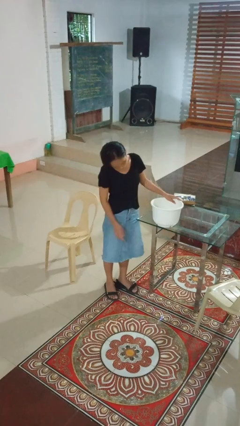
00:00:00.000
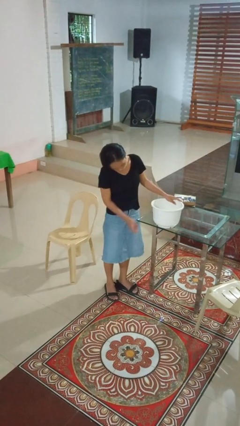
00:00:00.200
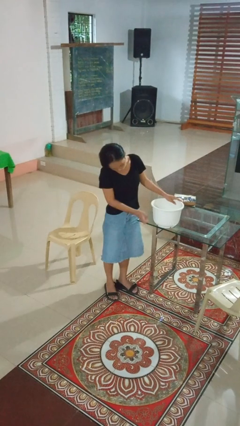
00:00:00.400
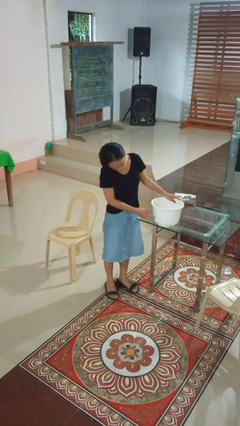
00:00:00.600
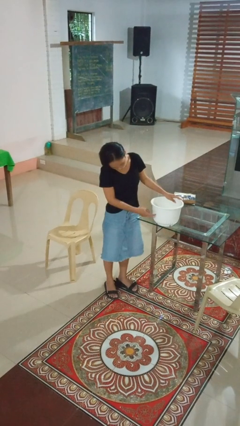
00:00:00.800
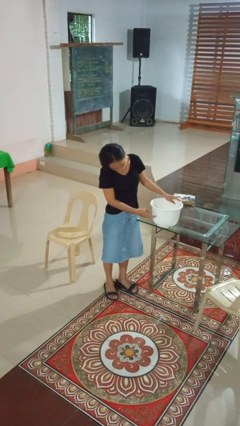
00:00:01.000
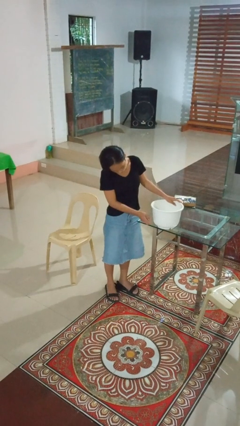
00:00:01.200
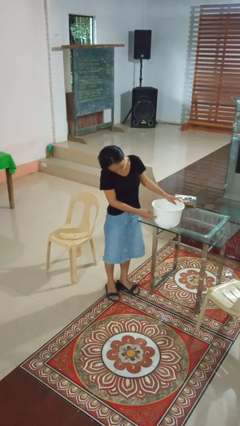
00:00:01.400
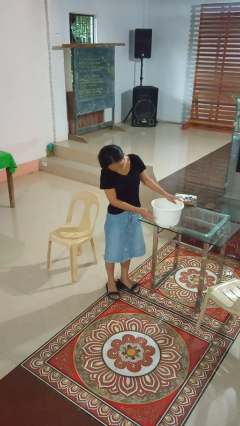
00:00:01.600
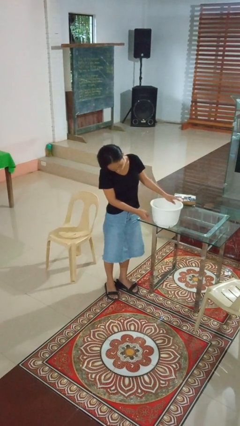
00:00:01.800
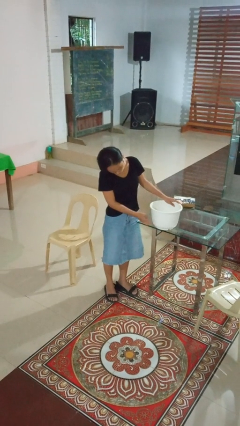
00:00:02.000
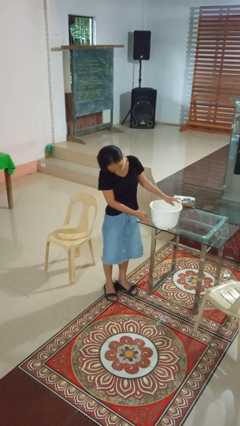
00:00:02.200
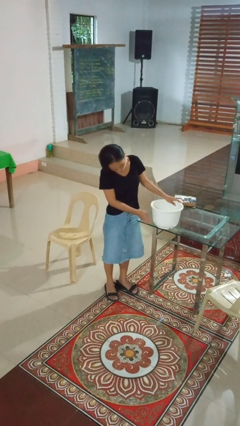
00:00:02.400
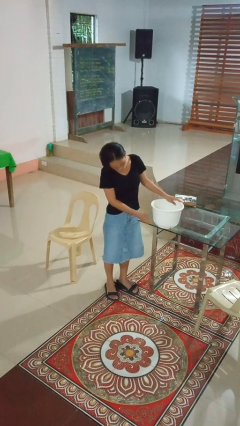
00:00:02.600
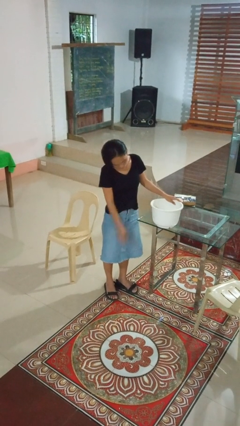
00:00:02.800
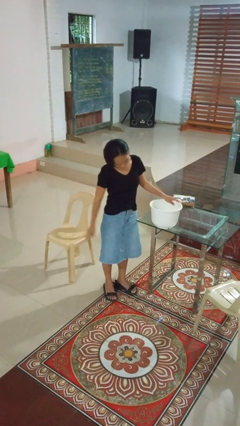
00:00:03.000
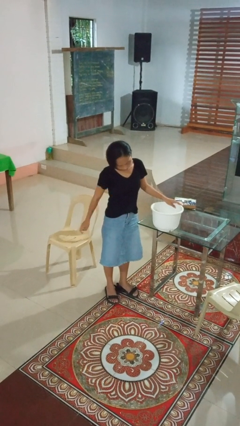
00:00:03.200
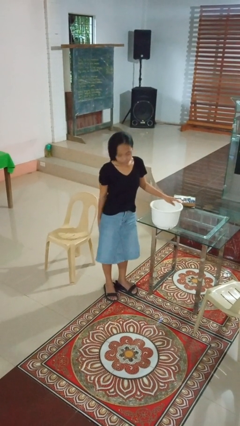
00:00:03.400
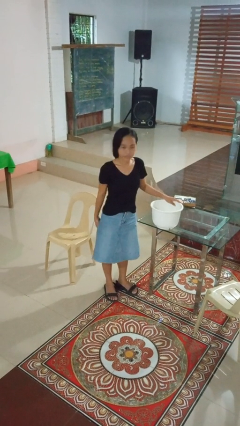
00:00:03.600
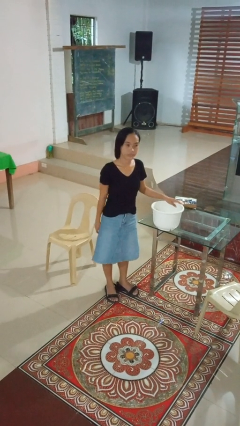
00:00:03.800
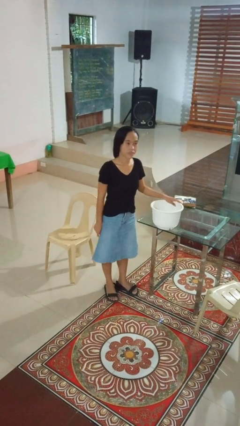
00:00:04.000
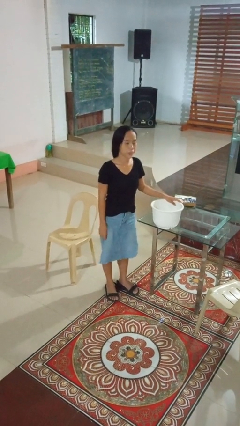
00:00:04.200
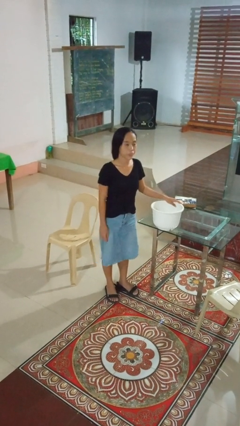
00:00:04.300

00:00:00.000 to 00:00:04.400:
person taps object with finger

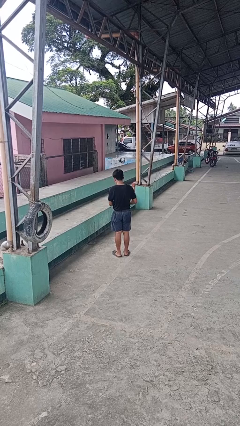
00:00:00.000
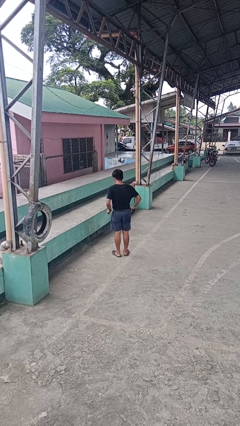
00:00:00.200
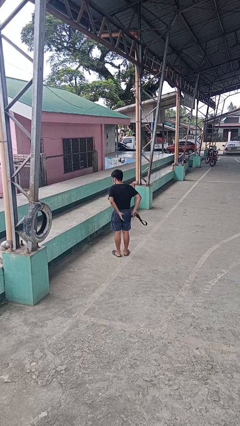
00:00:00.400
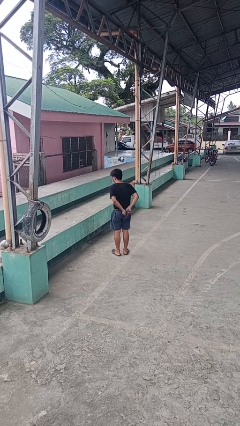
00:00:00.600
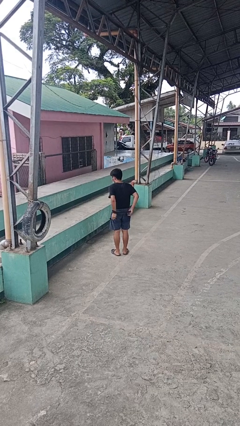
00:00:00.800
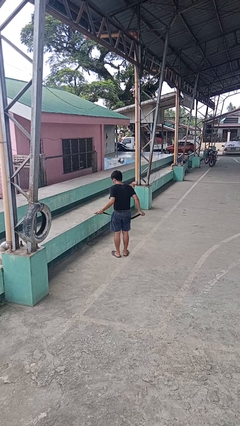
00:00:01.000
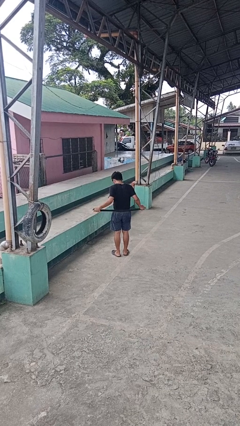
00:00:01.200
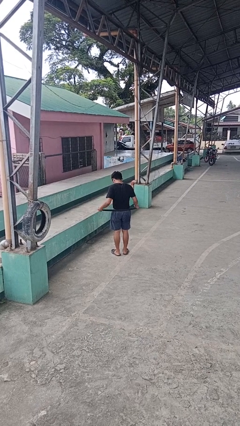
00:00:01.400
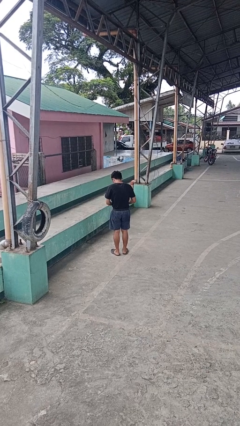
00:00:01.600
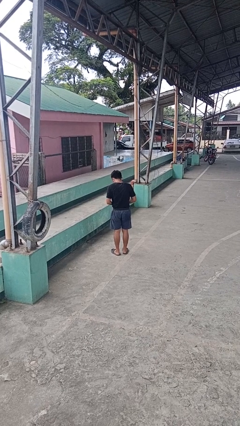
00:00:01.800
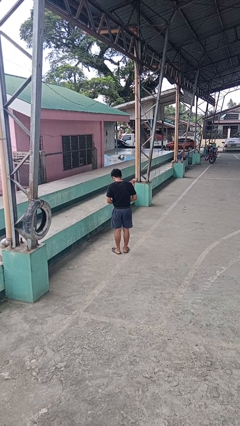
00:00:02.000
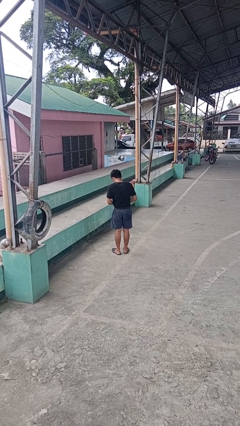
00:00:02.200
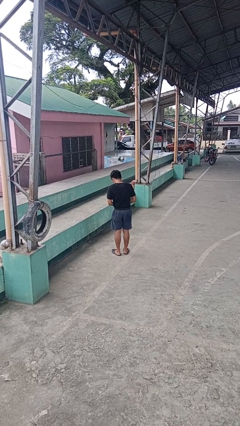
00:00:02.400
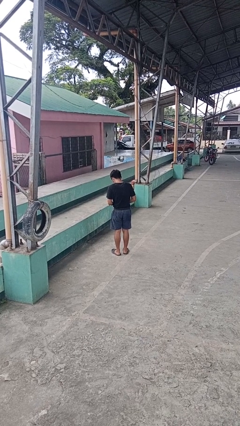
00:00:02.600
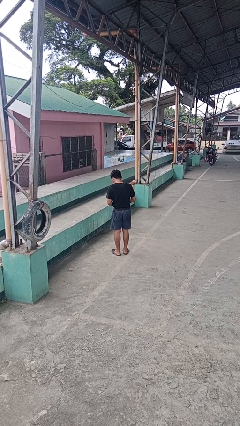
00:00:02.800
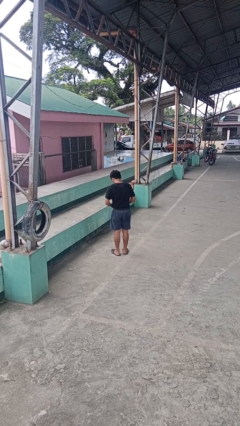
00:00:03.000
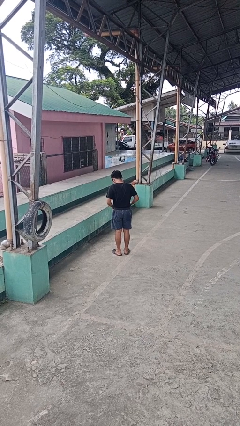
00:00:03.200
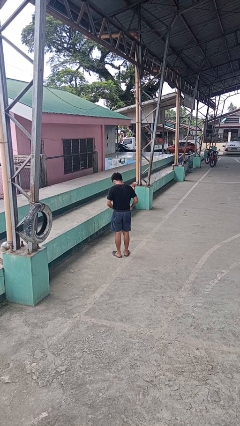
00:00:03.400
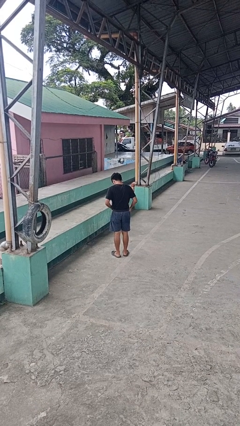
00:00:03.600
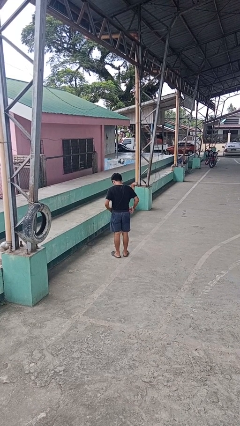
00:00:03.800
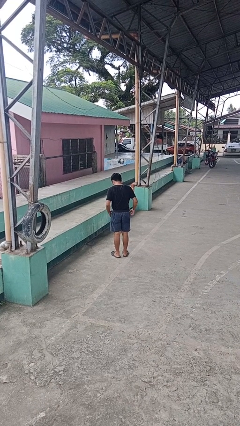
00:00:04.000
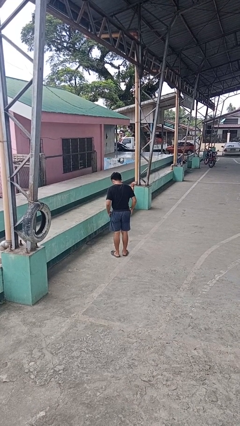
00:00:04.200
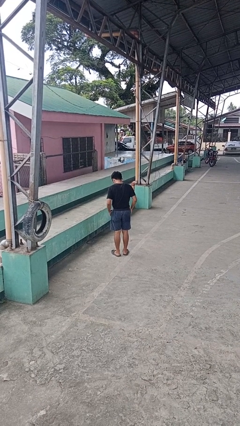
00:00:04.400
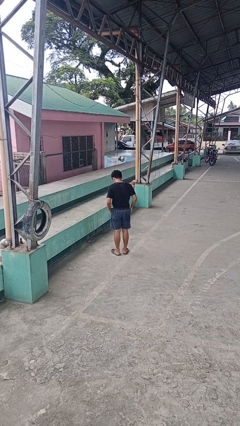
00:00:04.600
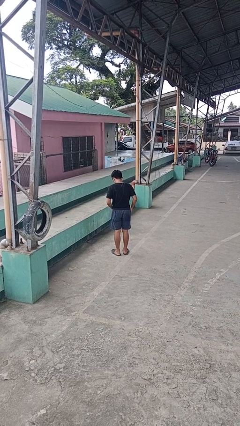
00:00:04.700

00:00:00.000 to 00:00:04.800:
person puts on belt

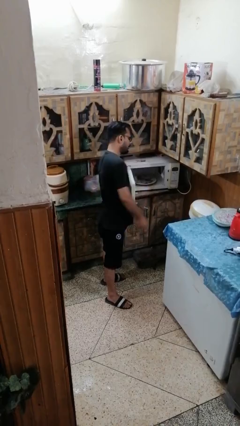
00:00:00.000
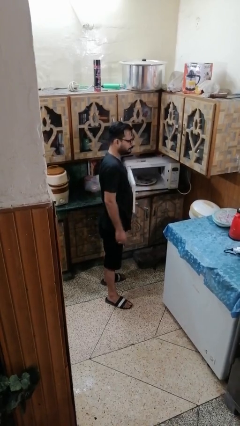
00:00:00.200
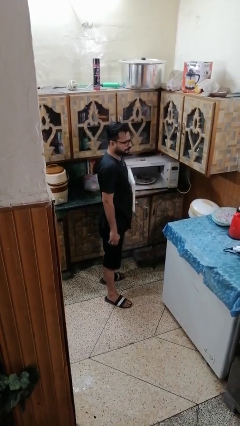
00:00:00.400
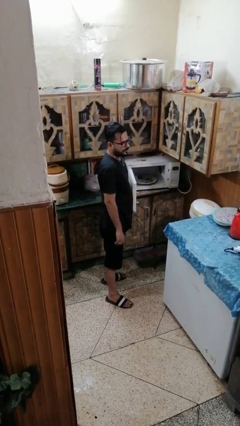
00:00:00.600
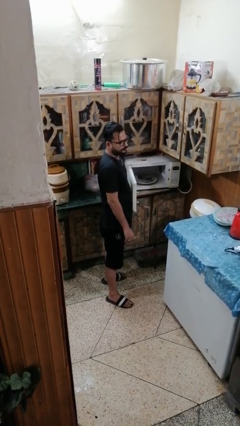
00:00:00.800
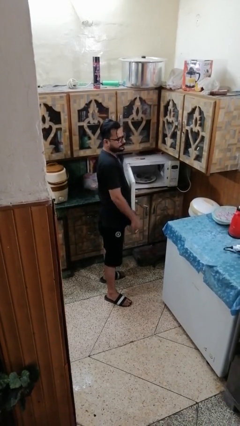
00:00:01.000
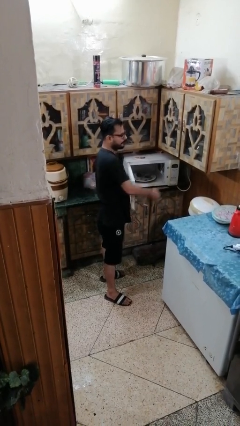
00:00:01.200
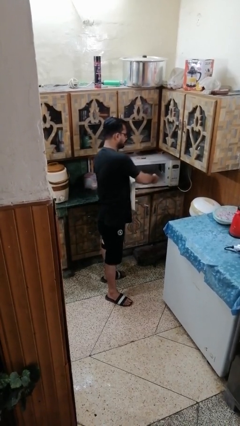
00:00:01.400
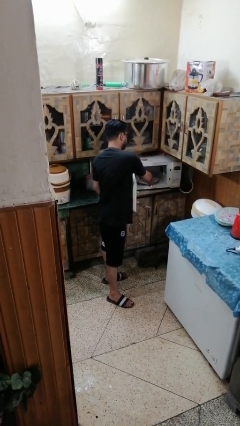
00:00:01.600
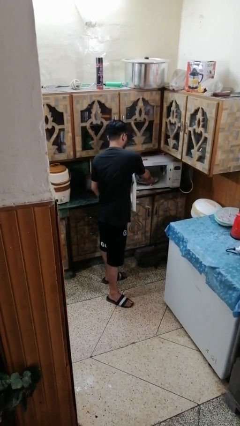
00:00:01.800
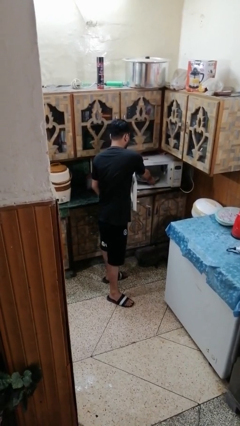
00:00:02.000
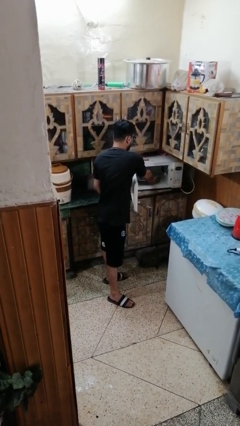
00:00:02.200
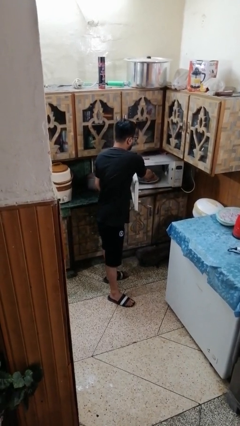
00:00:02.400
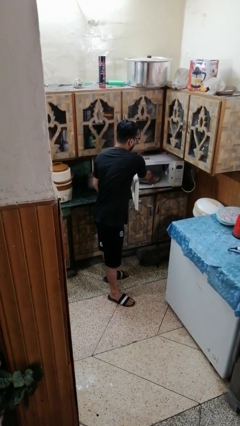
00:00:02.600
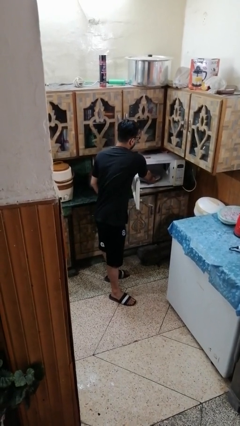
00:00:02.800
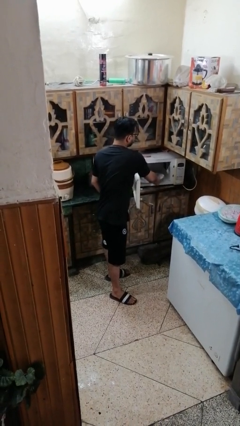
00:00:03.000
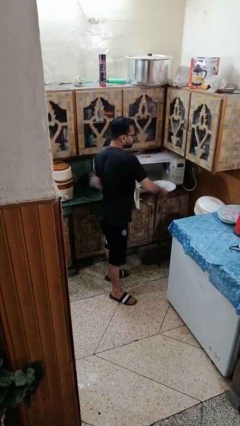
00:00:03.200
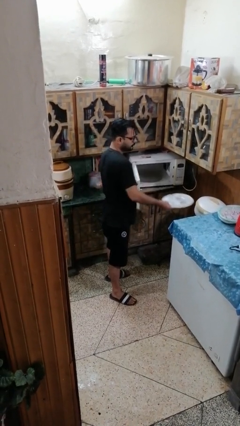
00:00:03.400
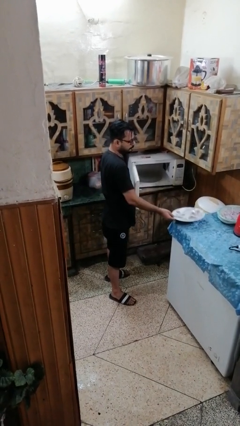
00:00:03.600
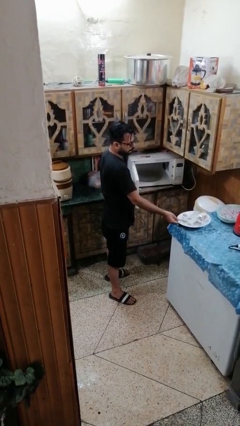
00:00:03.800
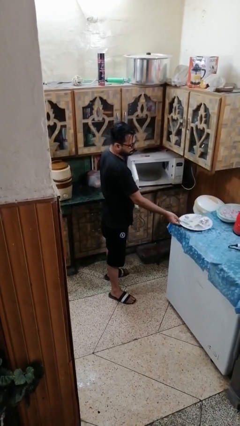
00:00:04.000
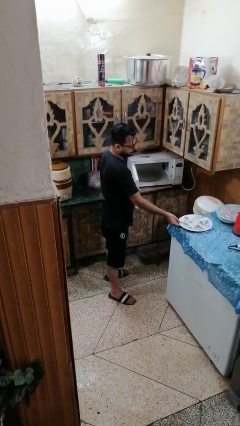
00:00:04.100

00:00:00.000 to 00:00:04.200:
person takes object from microwave

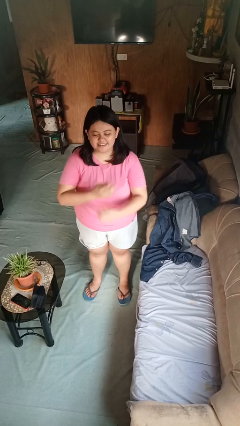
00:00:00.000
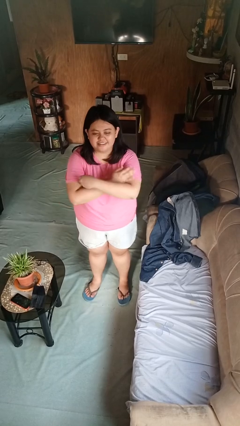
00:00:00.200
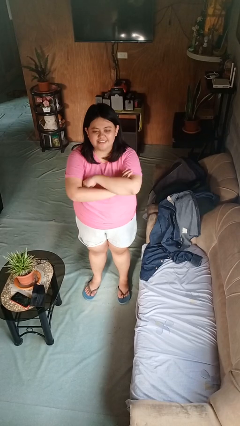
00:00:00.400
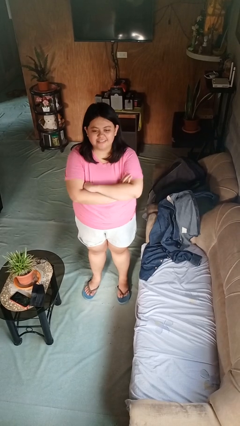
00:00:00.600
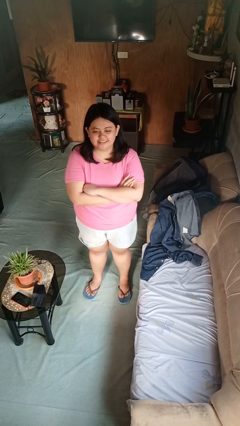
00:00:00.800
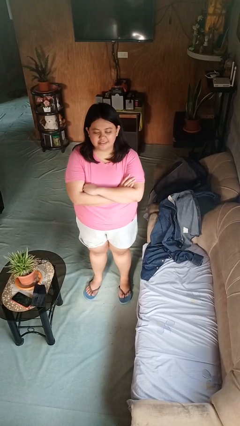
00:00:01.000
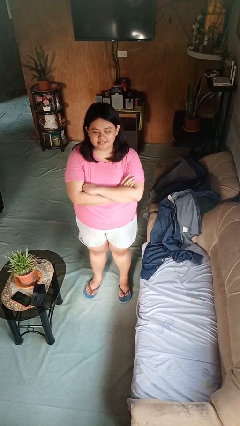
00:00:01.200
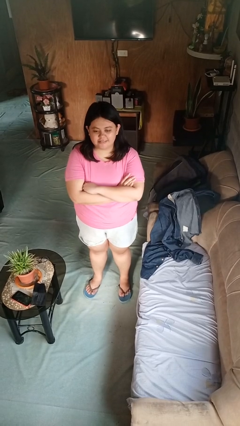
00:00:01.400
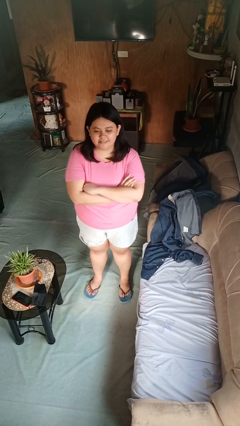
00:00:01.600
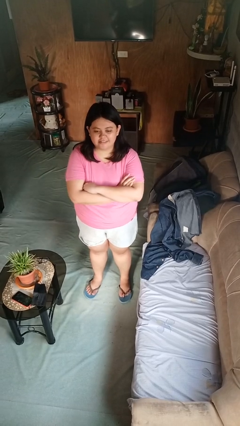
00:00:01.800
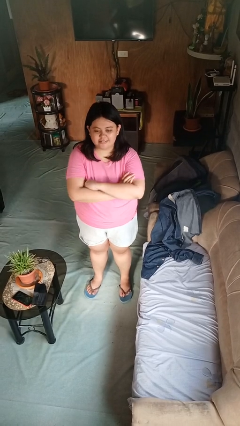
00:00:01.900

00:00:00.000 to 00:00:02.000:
person crosses arms

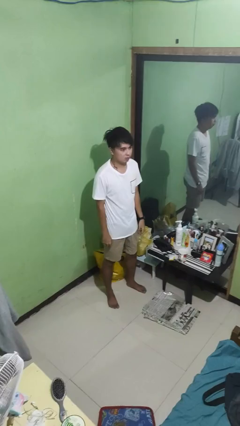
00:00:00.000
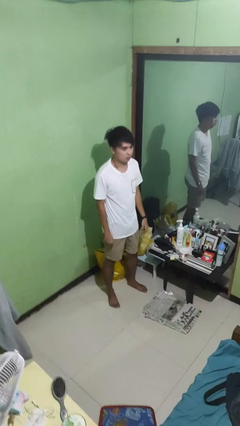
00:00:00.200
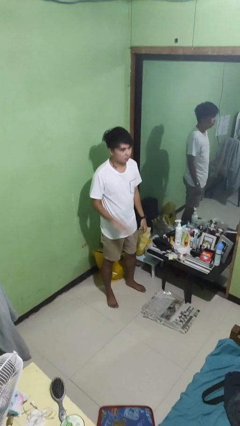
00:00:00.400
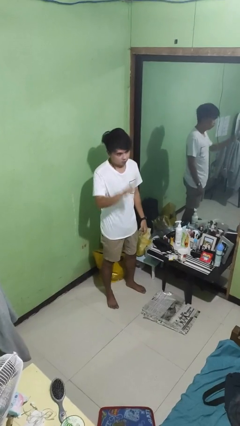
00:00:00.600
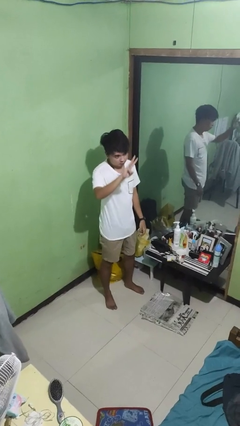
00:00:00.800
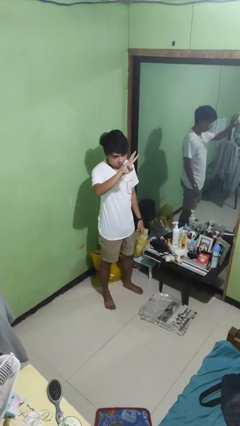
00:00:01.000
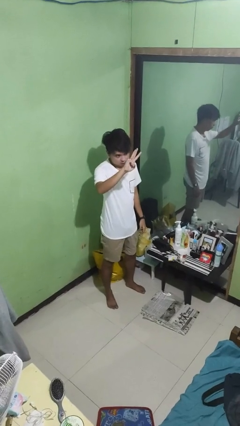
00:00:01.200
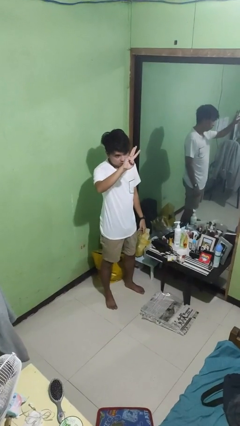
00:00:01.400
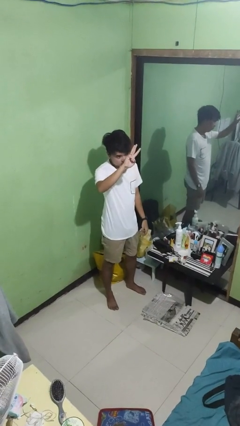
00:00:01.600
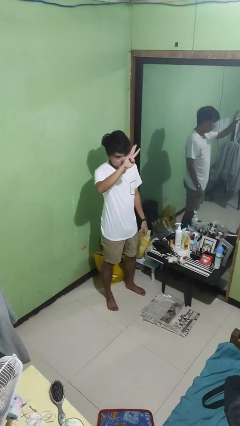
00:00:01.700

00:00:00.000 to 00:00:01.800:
person gestures number three

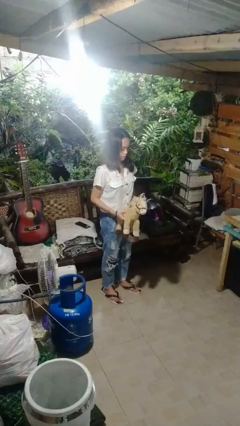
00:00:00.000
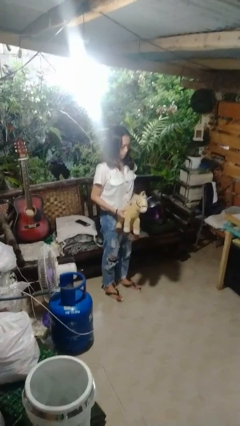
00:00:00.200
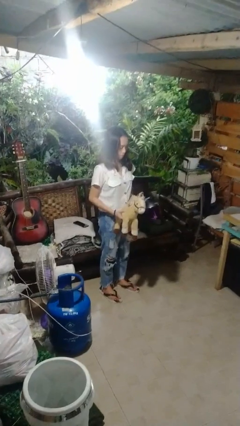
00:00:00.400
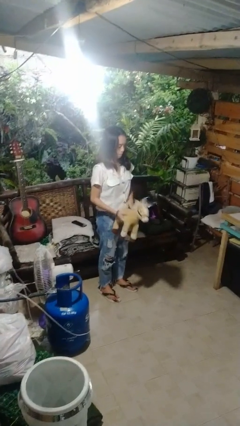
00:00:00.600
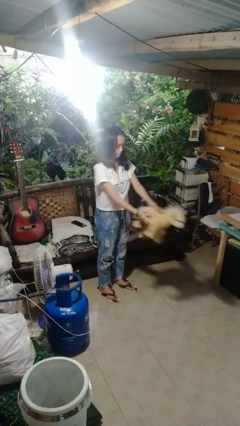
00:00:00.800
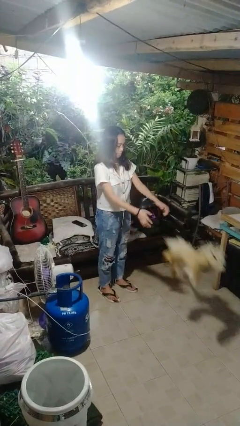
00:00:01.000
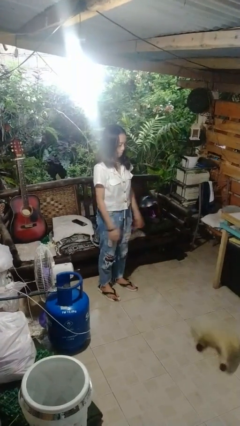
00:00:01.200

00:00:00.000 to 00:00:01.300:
person throws object to ground
